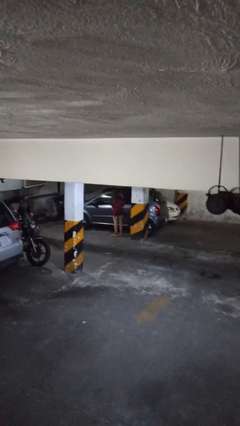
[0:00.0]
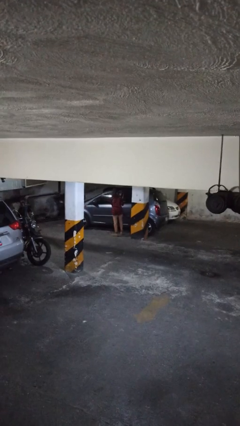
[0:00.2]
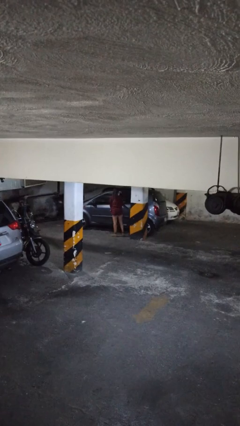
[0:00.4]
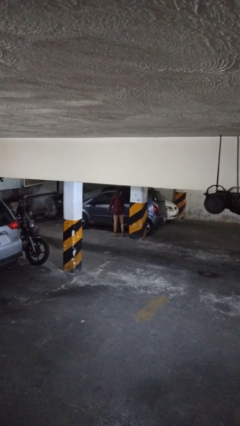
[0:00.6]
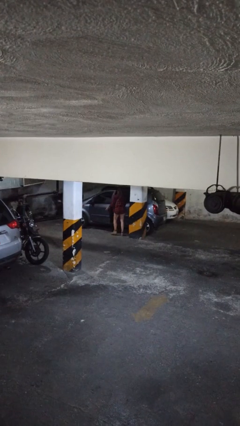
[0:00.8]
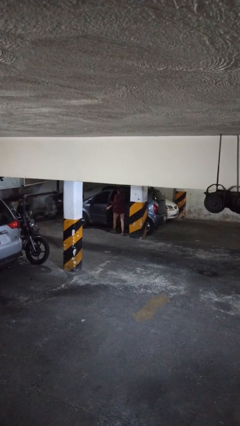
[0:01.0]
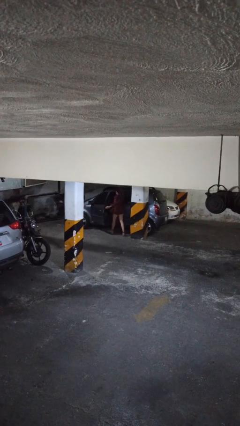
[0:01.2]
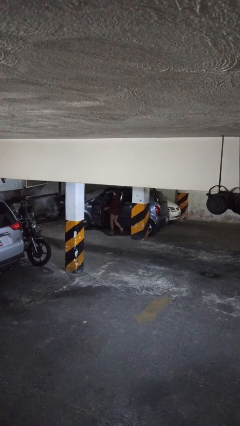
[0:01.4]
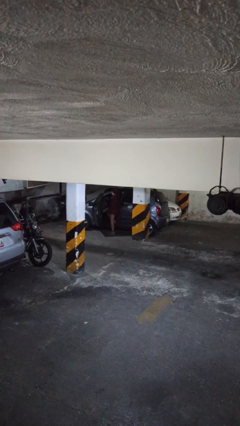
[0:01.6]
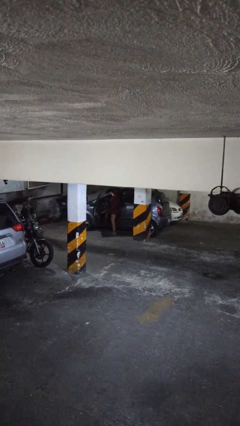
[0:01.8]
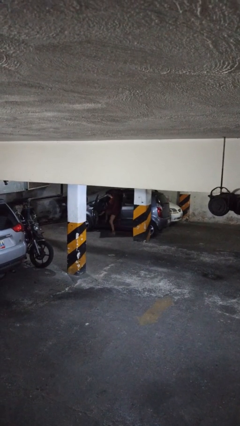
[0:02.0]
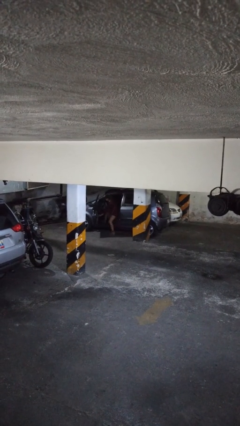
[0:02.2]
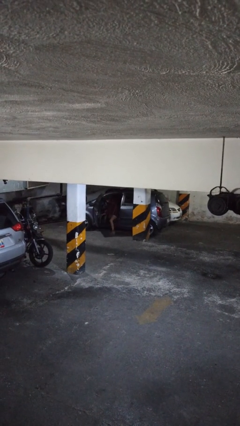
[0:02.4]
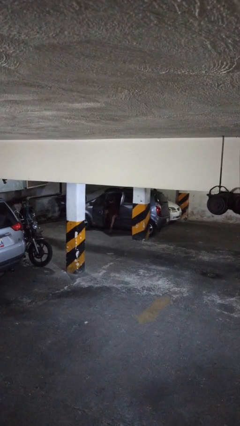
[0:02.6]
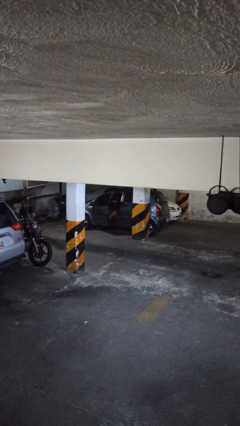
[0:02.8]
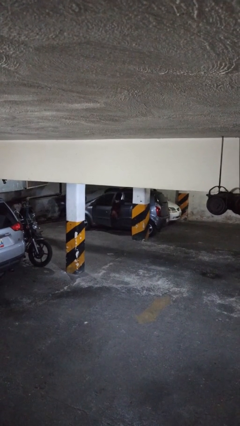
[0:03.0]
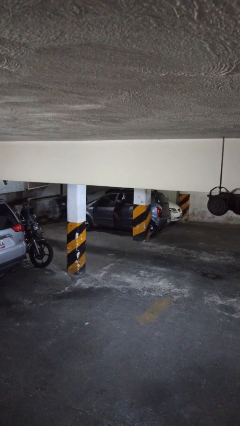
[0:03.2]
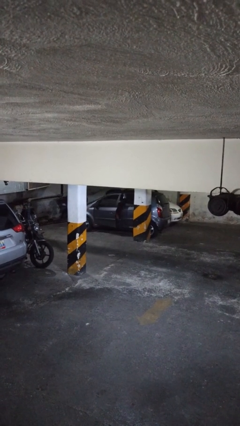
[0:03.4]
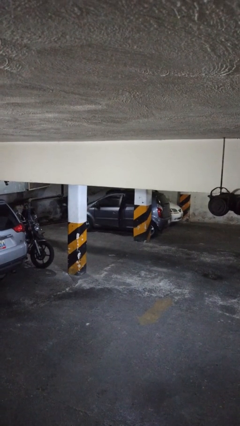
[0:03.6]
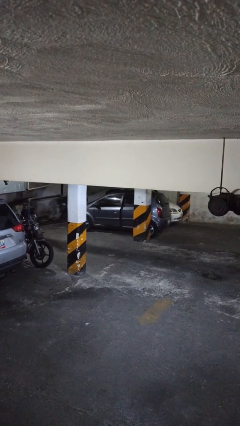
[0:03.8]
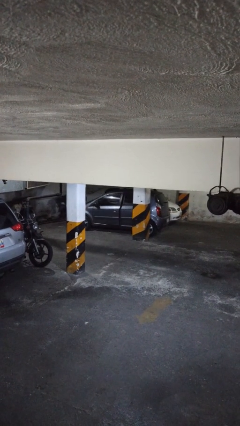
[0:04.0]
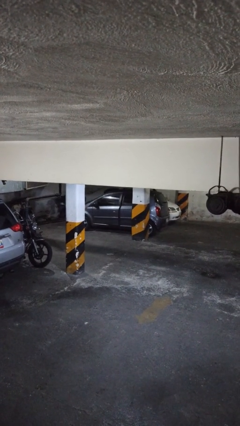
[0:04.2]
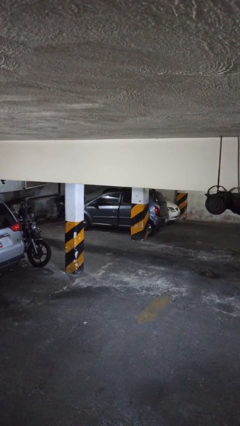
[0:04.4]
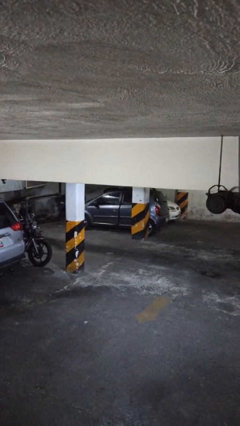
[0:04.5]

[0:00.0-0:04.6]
car picks up person

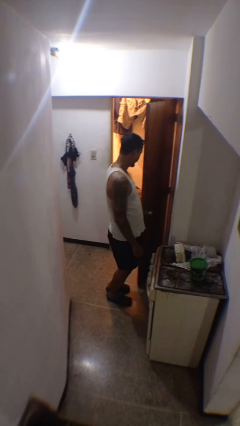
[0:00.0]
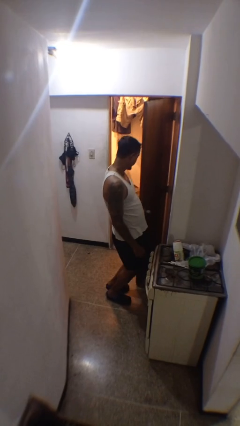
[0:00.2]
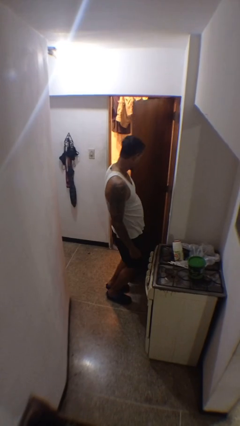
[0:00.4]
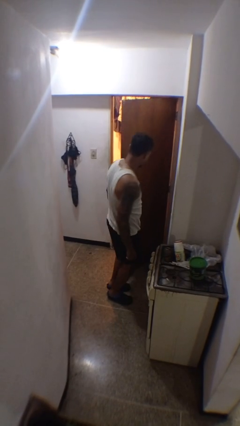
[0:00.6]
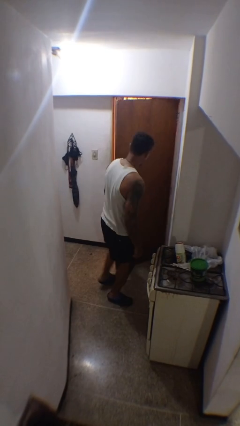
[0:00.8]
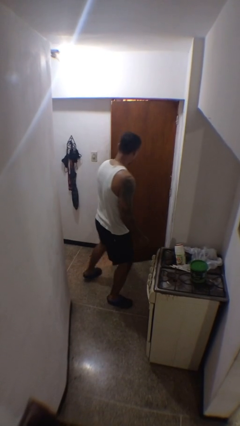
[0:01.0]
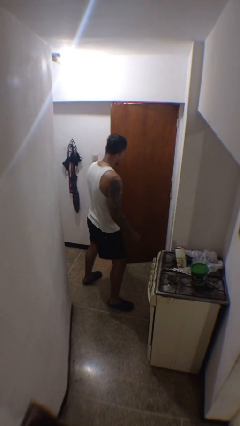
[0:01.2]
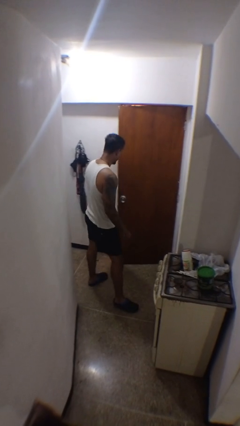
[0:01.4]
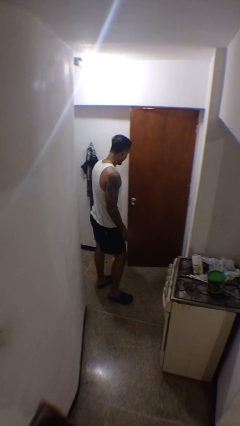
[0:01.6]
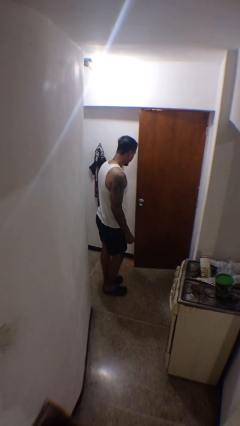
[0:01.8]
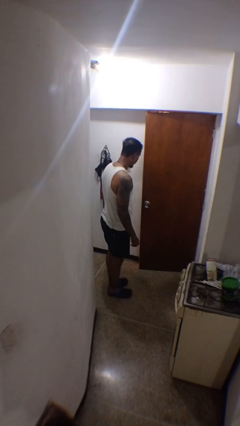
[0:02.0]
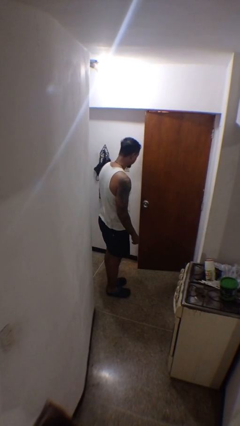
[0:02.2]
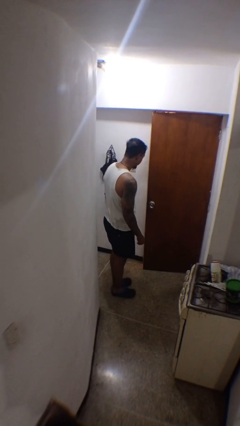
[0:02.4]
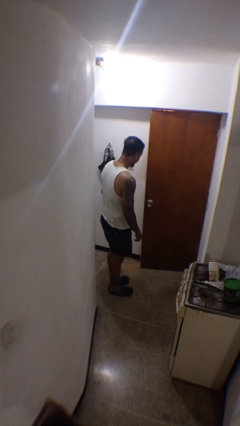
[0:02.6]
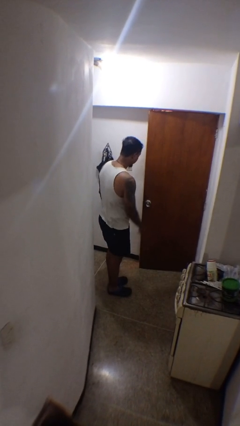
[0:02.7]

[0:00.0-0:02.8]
person closes door with hip

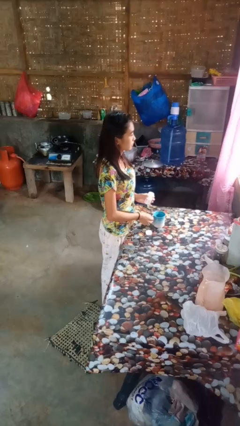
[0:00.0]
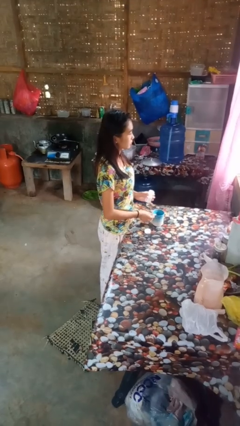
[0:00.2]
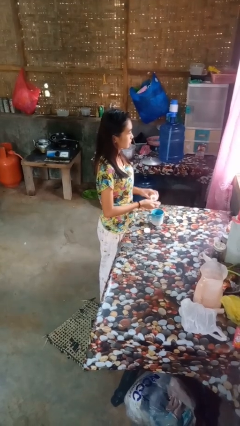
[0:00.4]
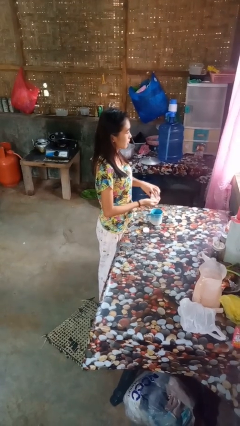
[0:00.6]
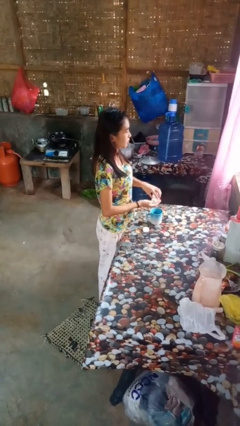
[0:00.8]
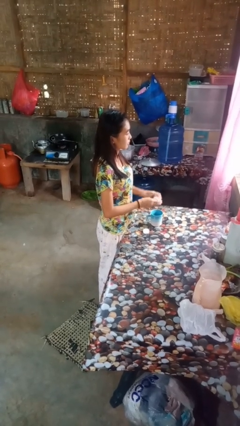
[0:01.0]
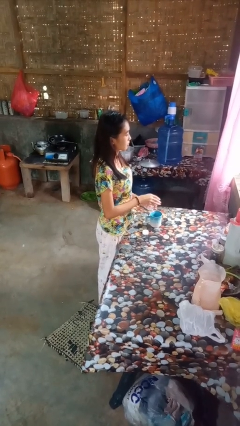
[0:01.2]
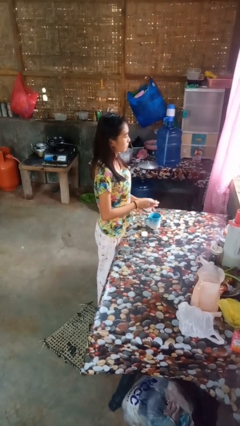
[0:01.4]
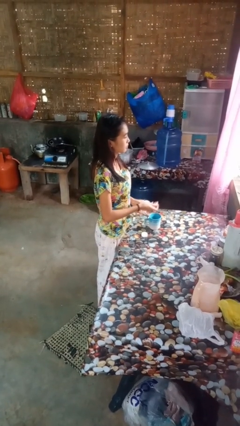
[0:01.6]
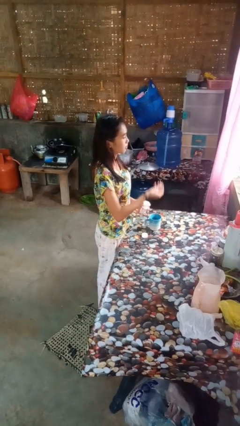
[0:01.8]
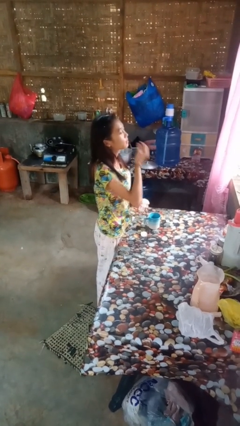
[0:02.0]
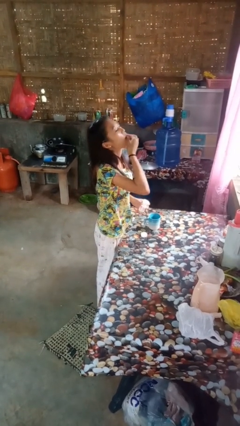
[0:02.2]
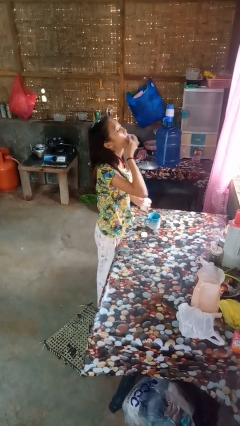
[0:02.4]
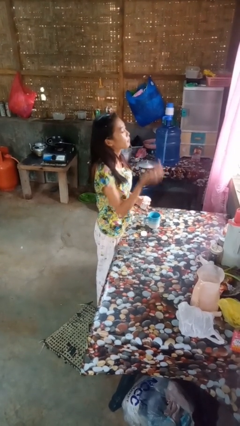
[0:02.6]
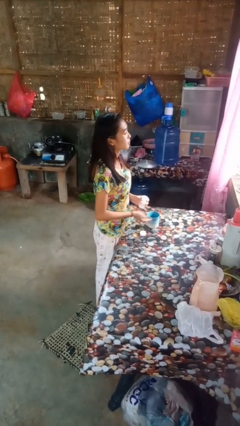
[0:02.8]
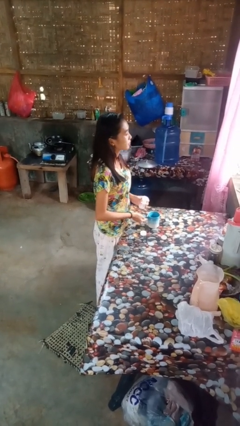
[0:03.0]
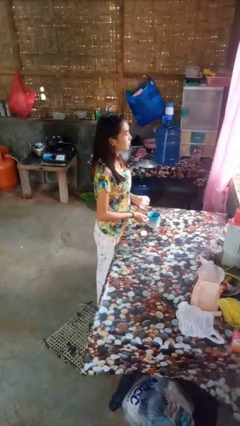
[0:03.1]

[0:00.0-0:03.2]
person takes medicine pills

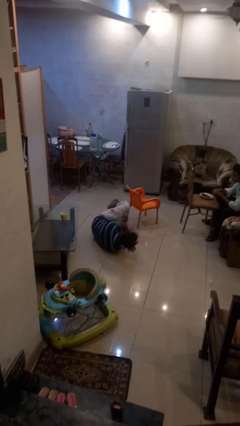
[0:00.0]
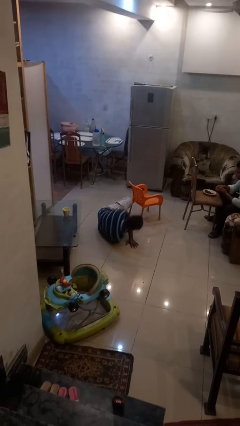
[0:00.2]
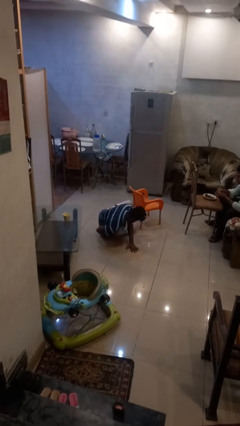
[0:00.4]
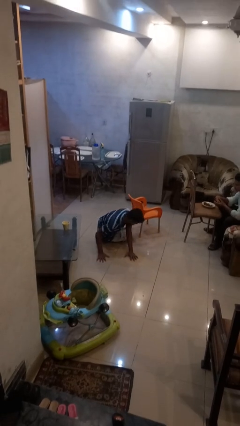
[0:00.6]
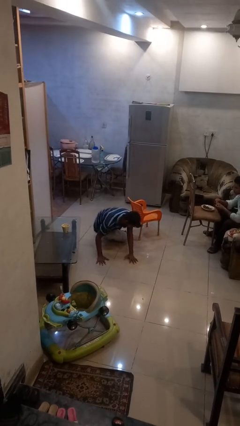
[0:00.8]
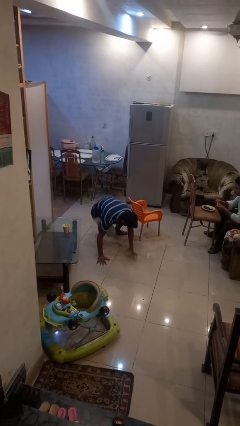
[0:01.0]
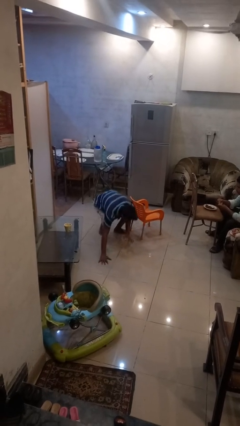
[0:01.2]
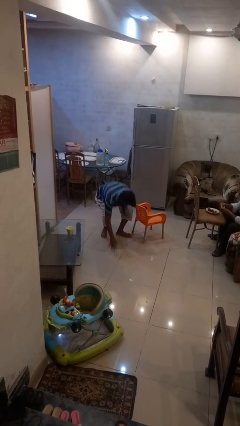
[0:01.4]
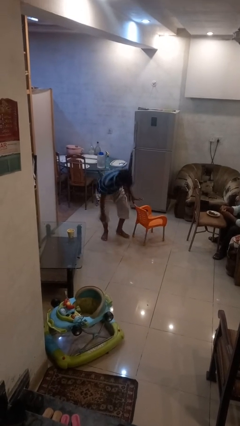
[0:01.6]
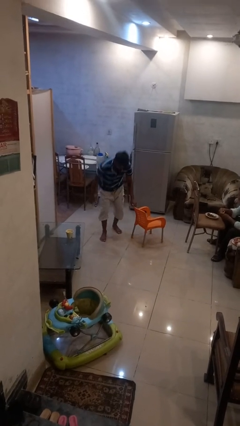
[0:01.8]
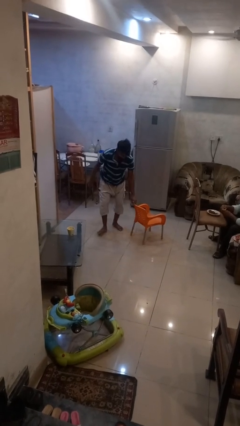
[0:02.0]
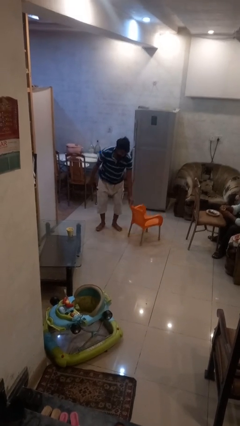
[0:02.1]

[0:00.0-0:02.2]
person stands up from floor

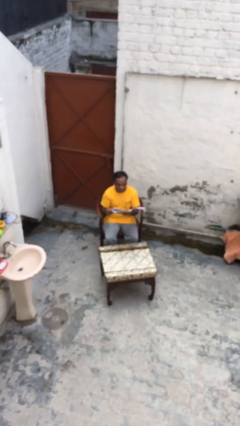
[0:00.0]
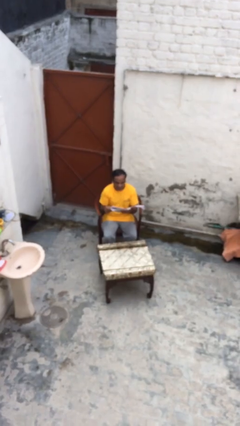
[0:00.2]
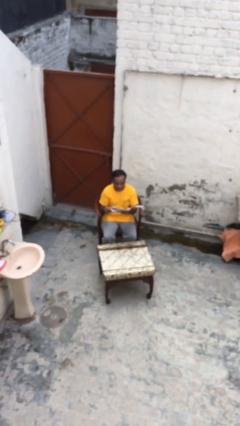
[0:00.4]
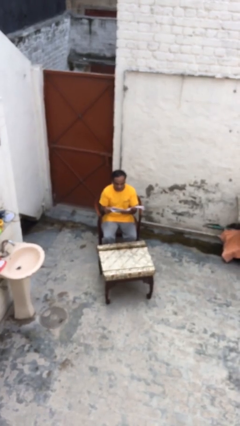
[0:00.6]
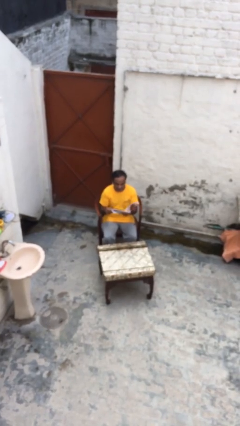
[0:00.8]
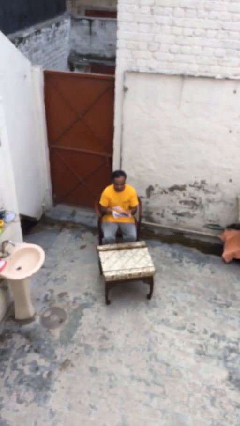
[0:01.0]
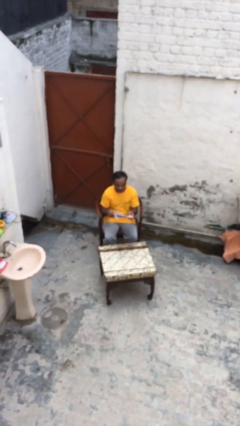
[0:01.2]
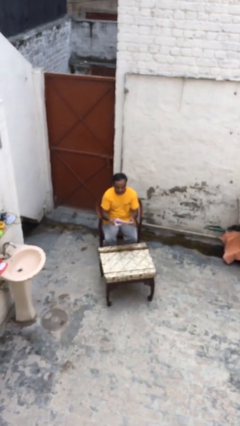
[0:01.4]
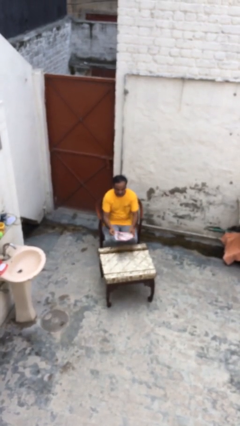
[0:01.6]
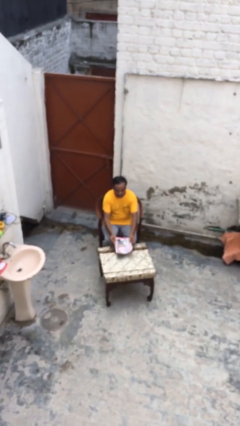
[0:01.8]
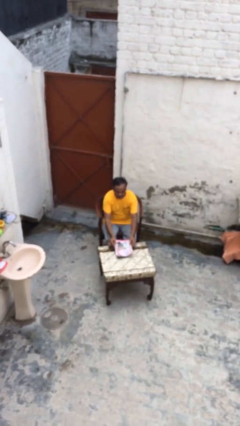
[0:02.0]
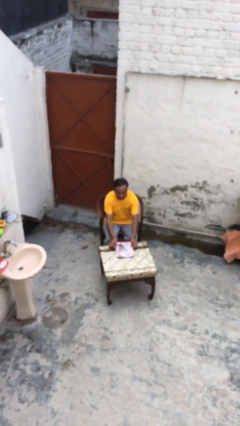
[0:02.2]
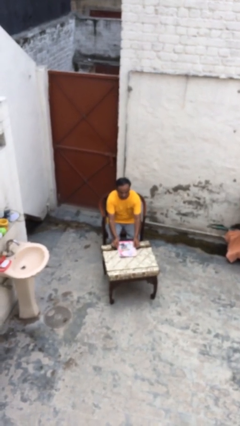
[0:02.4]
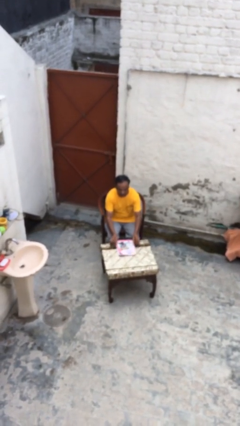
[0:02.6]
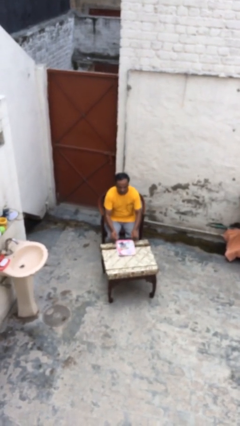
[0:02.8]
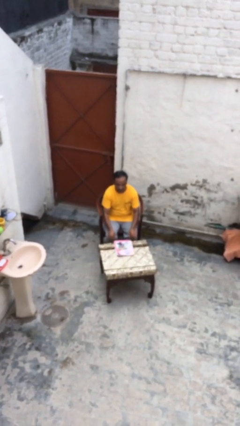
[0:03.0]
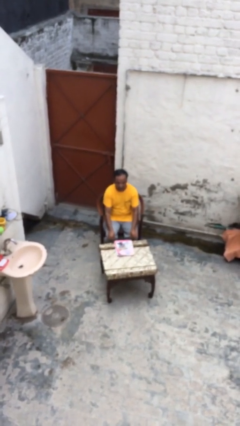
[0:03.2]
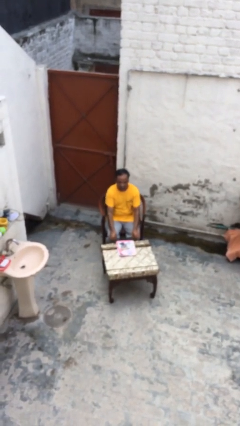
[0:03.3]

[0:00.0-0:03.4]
person puts down object on table

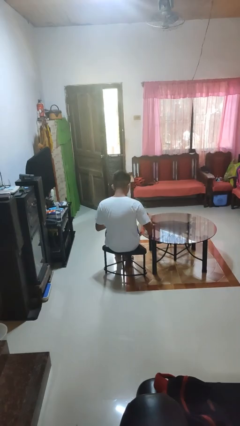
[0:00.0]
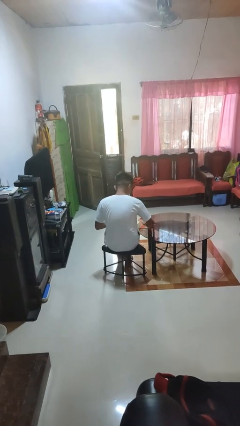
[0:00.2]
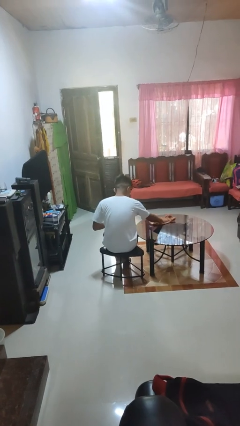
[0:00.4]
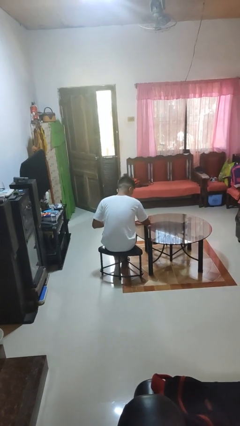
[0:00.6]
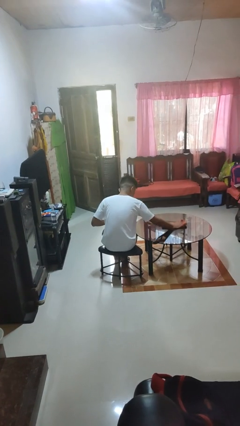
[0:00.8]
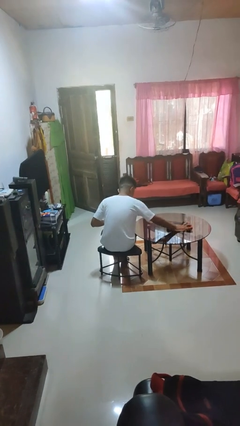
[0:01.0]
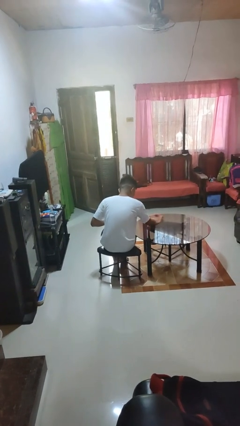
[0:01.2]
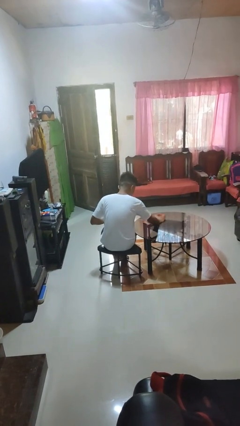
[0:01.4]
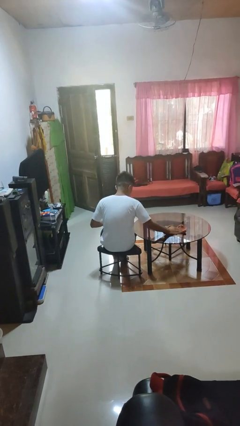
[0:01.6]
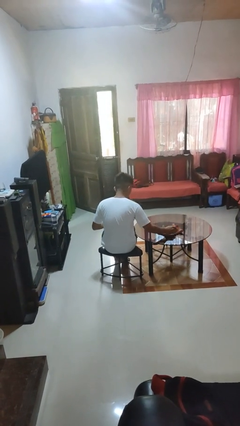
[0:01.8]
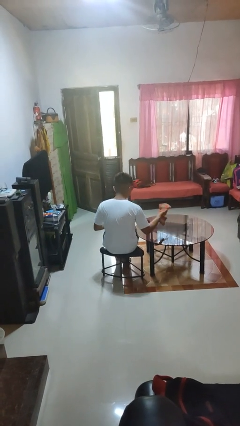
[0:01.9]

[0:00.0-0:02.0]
person cleans table with rag
